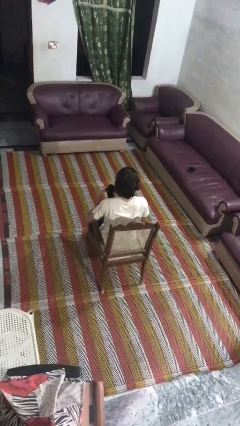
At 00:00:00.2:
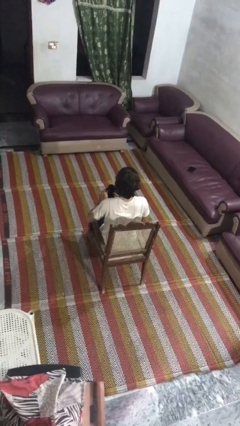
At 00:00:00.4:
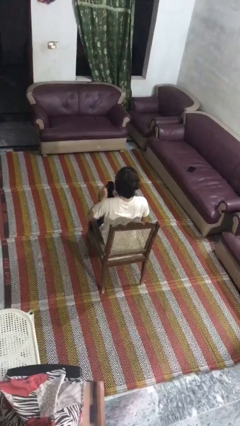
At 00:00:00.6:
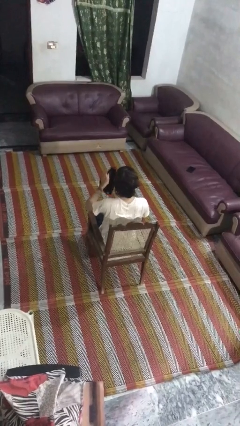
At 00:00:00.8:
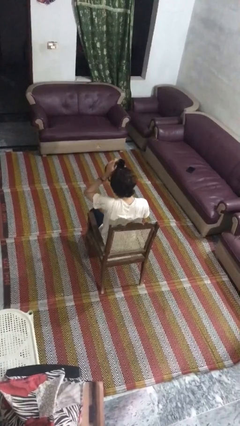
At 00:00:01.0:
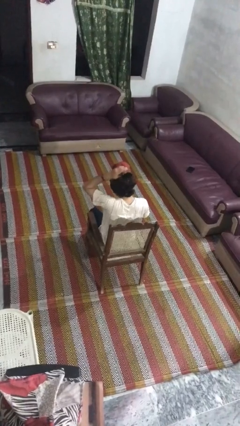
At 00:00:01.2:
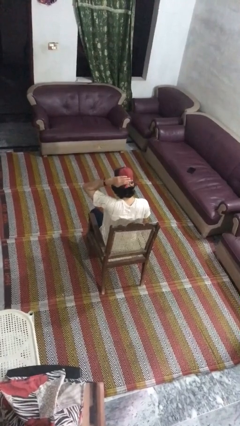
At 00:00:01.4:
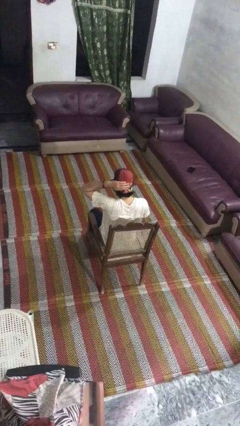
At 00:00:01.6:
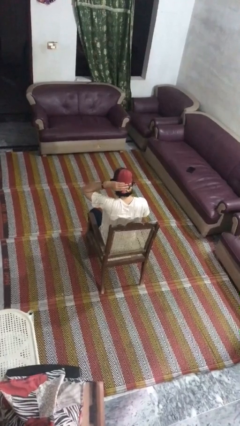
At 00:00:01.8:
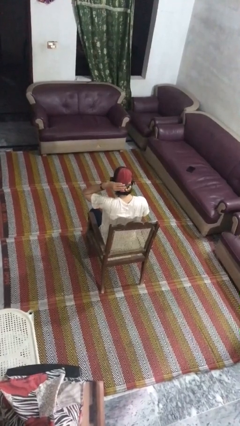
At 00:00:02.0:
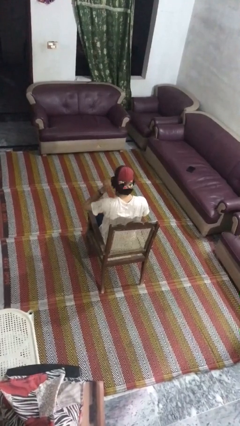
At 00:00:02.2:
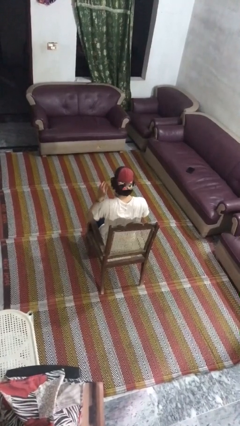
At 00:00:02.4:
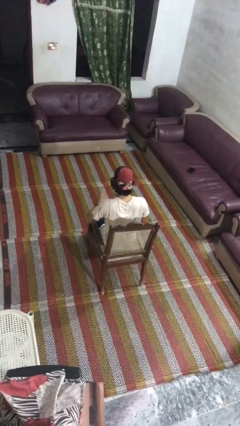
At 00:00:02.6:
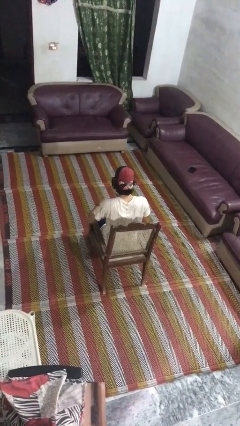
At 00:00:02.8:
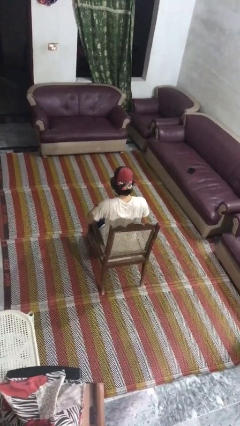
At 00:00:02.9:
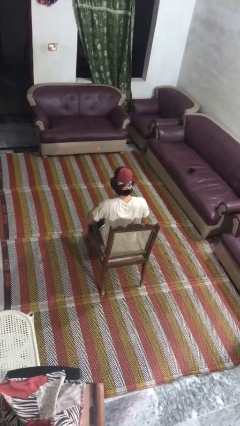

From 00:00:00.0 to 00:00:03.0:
person puts on hat

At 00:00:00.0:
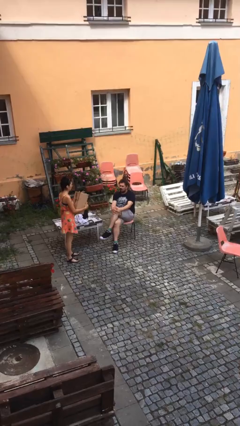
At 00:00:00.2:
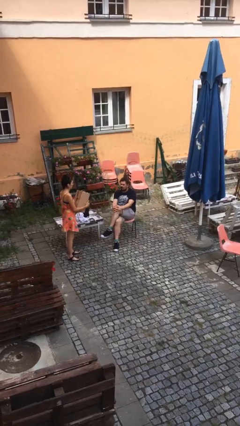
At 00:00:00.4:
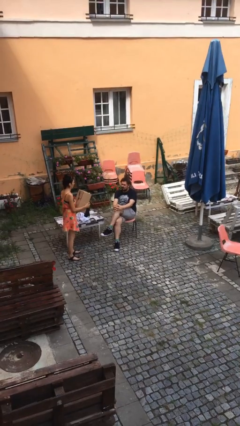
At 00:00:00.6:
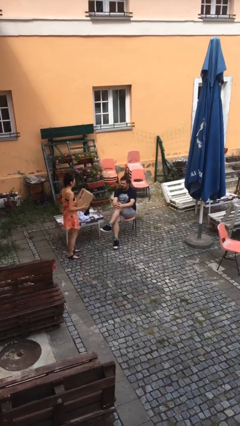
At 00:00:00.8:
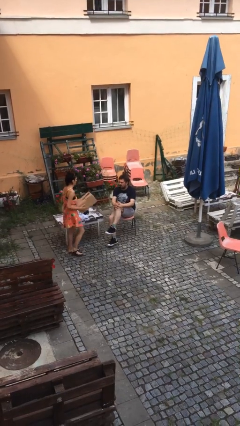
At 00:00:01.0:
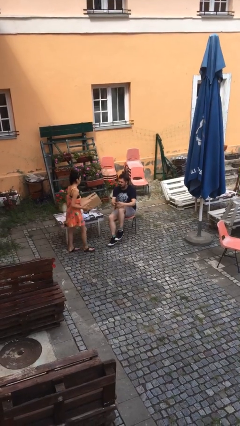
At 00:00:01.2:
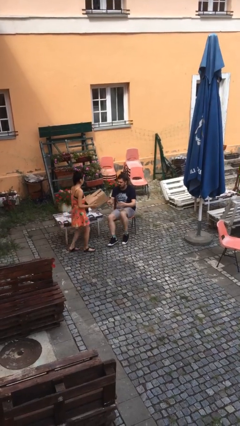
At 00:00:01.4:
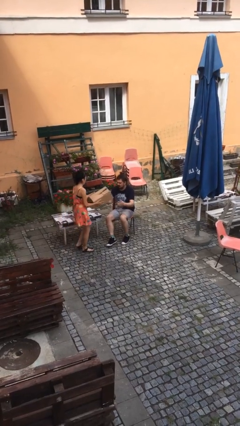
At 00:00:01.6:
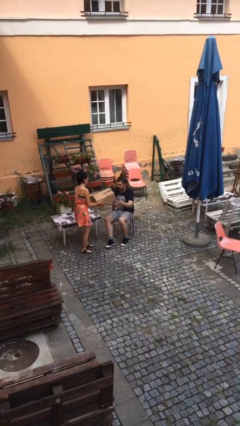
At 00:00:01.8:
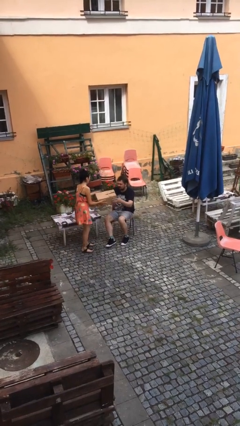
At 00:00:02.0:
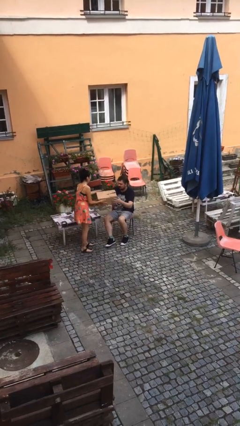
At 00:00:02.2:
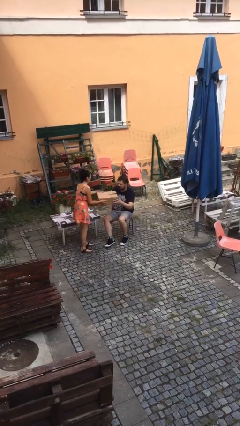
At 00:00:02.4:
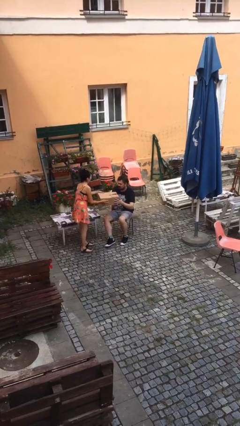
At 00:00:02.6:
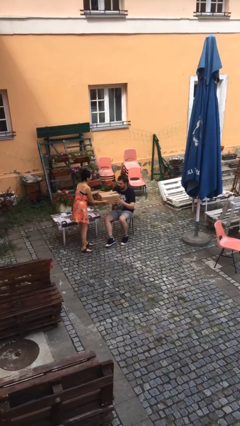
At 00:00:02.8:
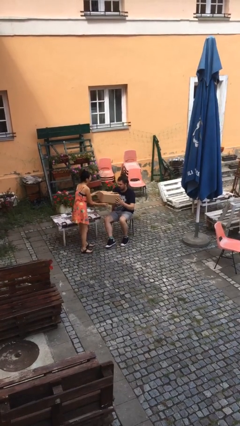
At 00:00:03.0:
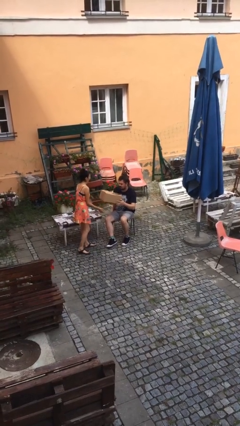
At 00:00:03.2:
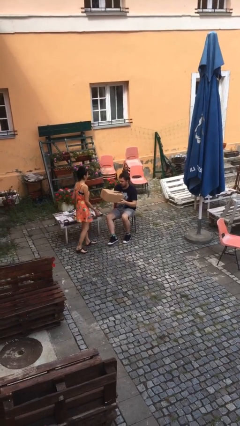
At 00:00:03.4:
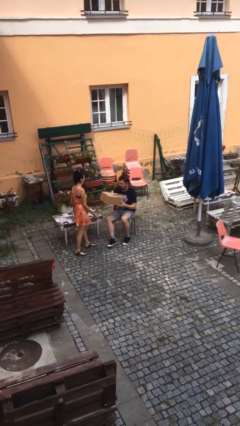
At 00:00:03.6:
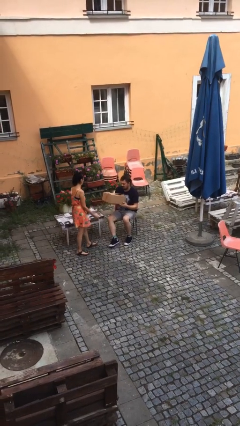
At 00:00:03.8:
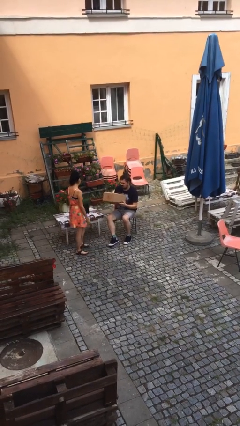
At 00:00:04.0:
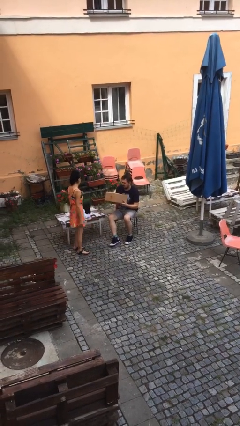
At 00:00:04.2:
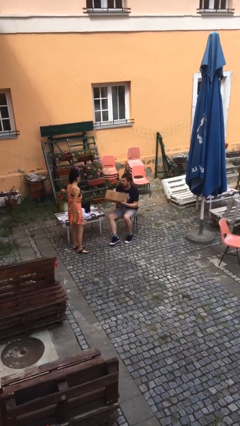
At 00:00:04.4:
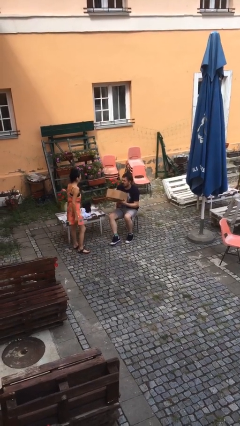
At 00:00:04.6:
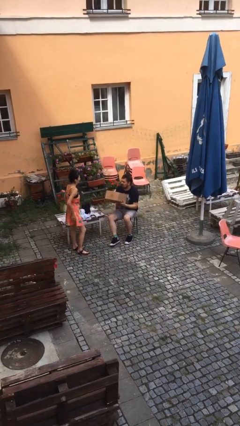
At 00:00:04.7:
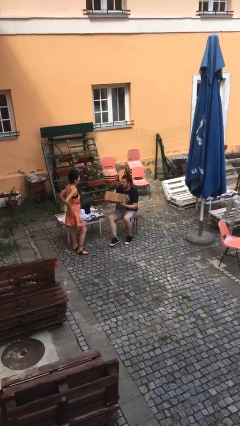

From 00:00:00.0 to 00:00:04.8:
person transfers object to person

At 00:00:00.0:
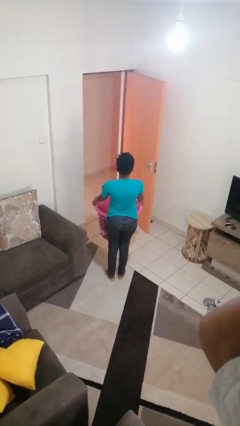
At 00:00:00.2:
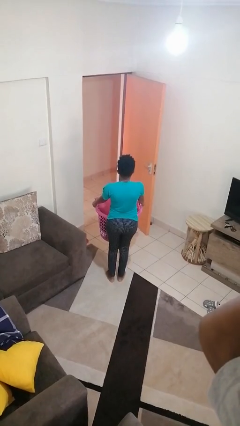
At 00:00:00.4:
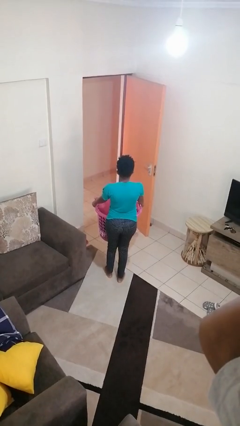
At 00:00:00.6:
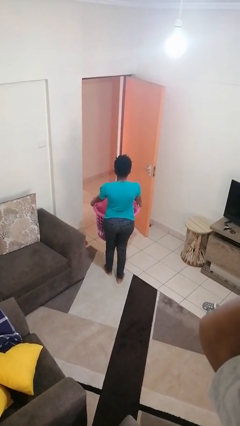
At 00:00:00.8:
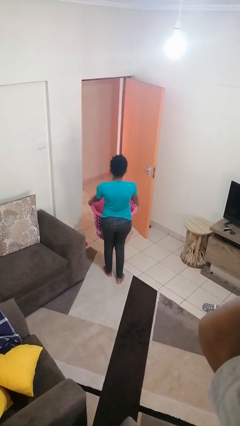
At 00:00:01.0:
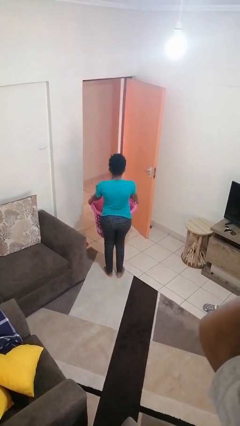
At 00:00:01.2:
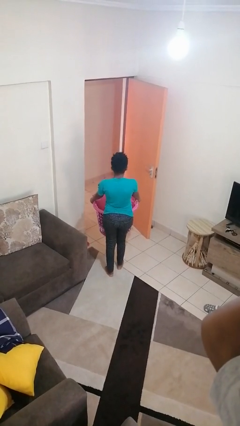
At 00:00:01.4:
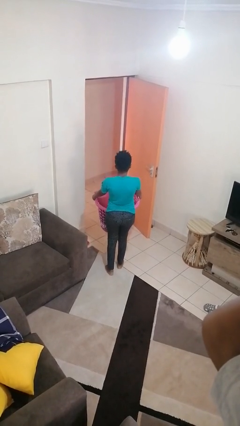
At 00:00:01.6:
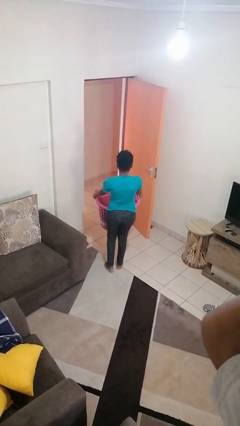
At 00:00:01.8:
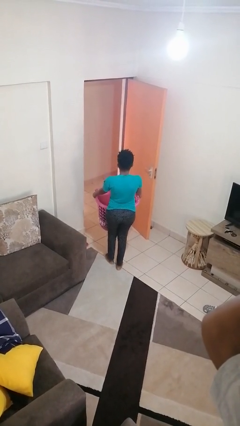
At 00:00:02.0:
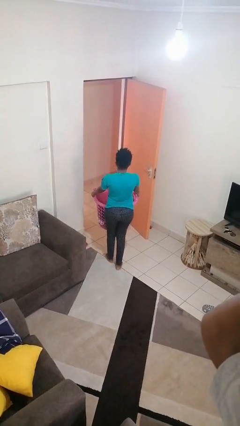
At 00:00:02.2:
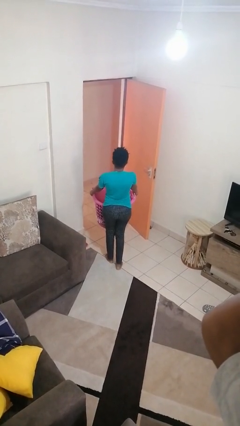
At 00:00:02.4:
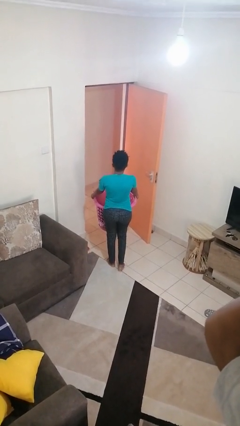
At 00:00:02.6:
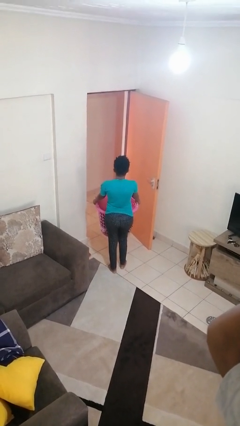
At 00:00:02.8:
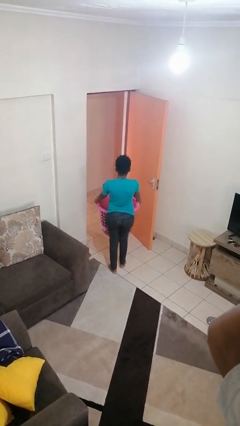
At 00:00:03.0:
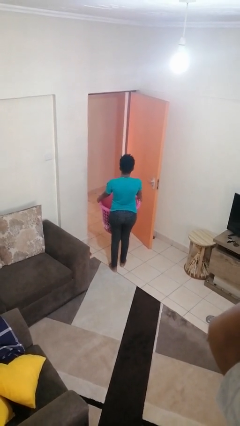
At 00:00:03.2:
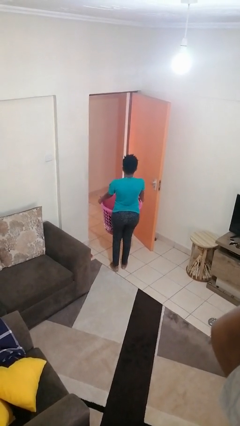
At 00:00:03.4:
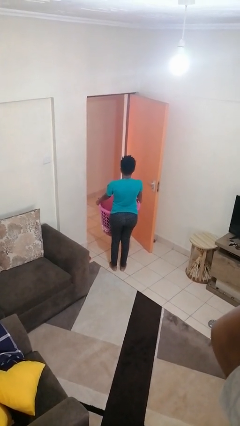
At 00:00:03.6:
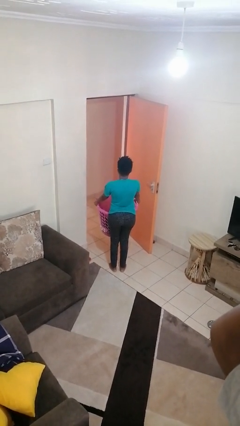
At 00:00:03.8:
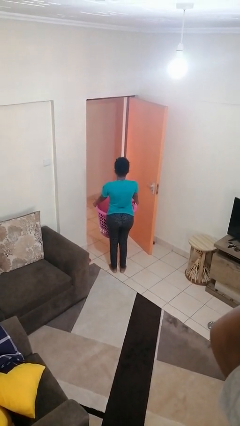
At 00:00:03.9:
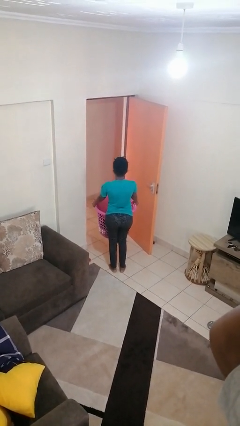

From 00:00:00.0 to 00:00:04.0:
person carries laundry basket

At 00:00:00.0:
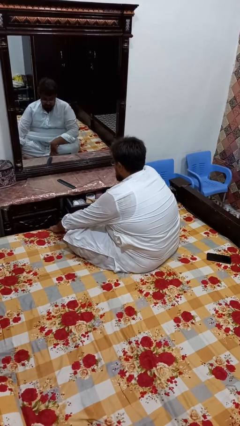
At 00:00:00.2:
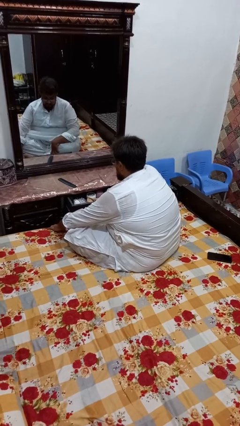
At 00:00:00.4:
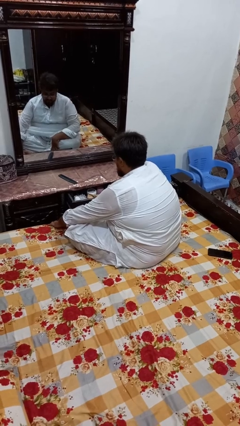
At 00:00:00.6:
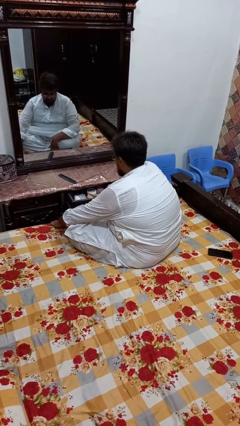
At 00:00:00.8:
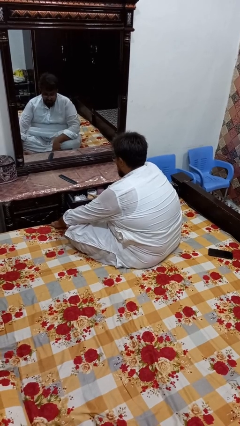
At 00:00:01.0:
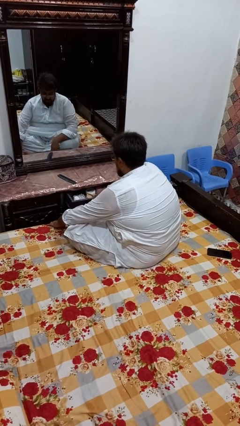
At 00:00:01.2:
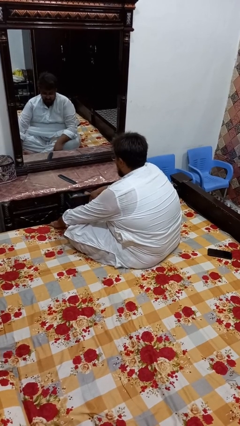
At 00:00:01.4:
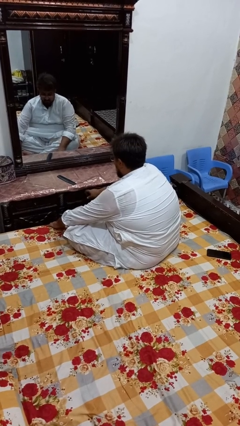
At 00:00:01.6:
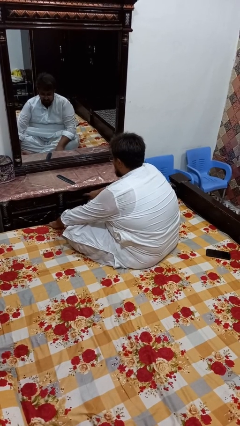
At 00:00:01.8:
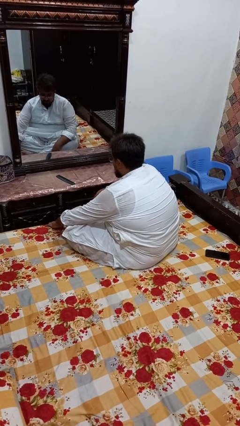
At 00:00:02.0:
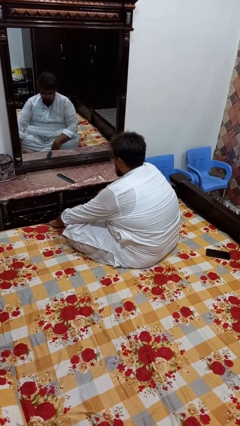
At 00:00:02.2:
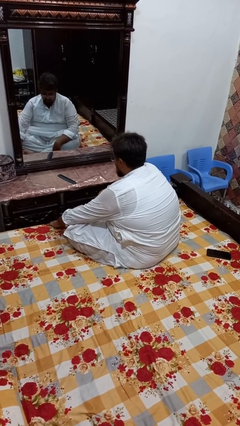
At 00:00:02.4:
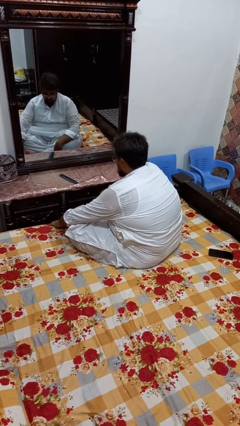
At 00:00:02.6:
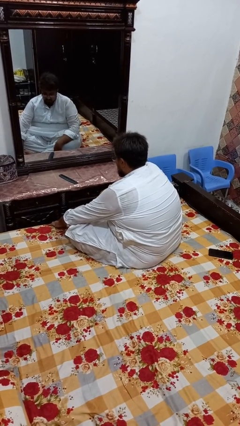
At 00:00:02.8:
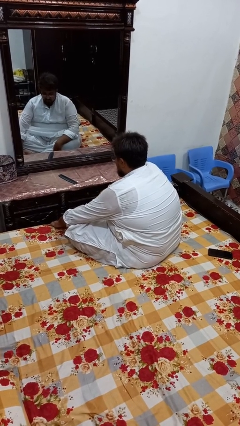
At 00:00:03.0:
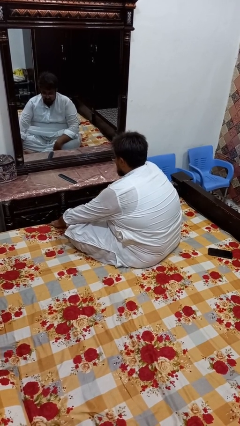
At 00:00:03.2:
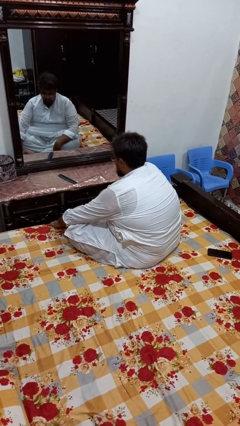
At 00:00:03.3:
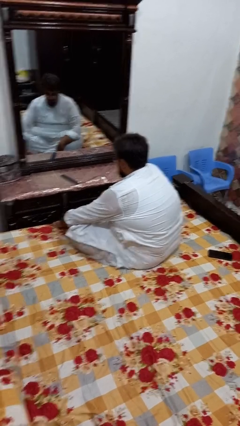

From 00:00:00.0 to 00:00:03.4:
person closes dresser drawer

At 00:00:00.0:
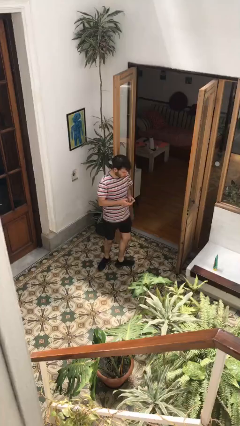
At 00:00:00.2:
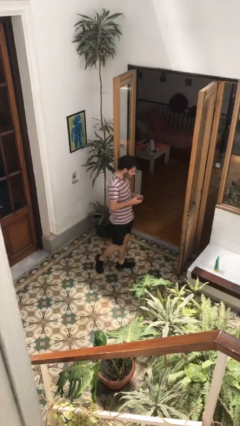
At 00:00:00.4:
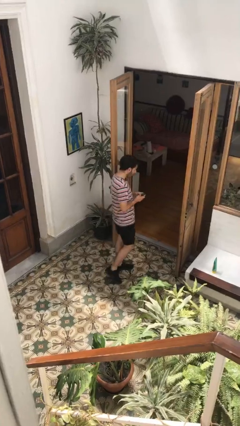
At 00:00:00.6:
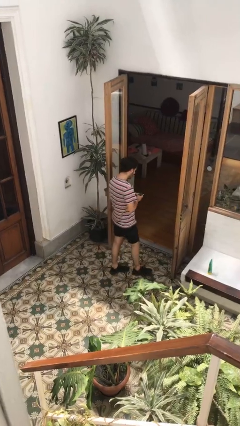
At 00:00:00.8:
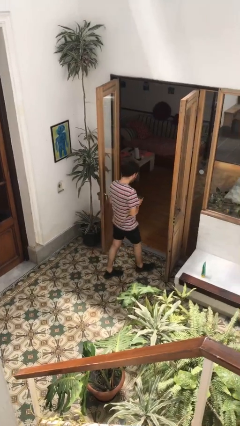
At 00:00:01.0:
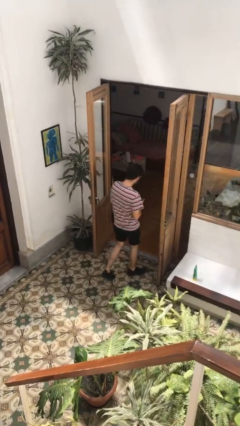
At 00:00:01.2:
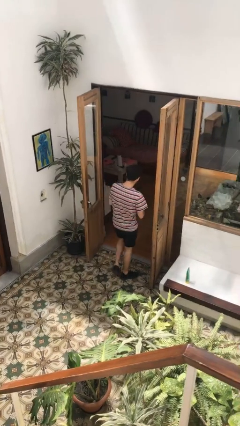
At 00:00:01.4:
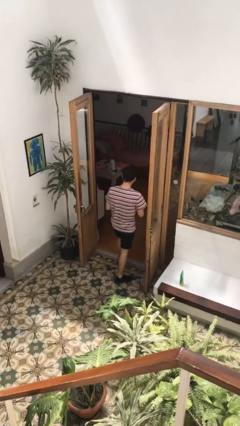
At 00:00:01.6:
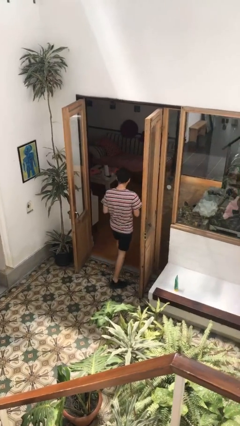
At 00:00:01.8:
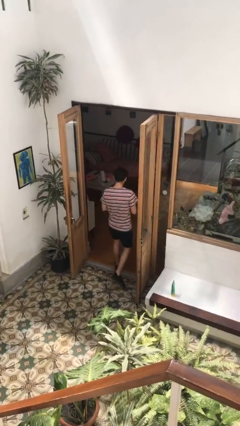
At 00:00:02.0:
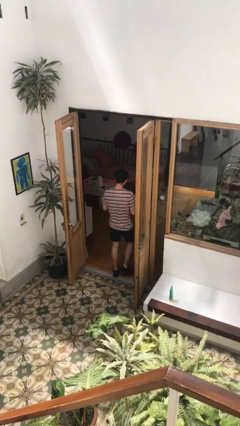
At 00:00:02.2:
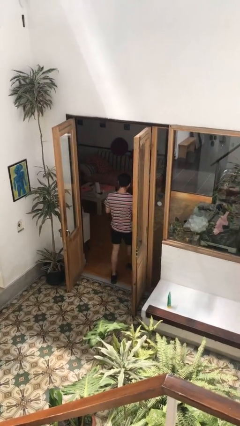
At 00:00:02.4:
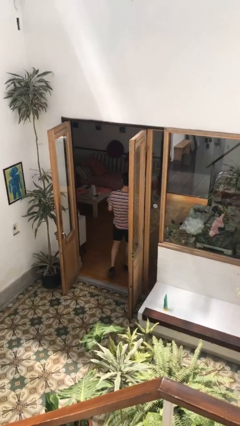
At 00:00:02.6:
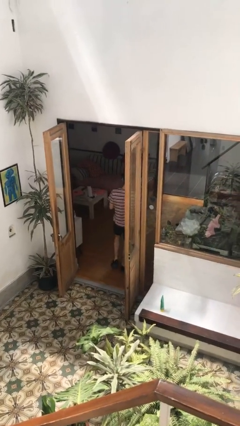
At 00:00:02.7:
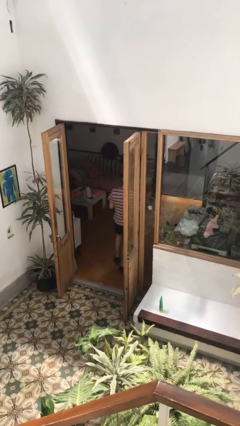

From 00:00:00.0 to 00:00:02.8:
person exits scene through structure
